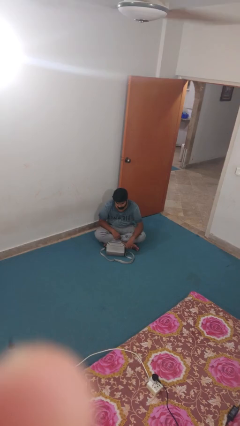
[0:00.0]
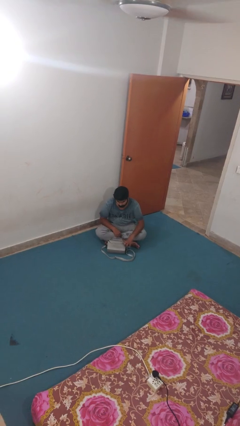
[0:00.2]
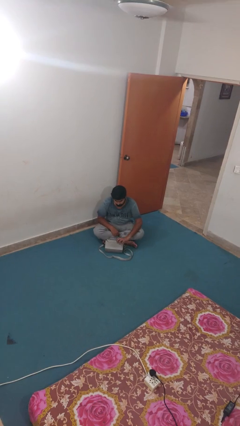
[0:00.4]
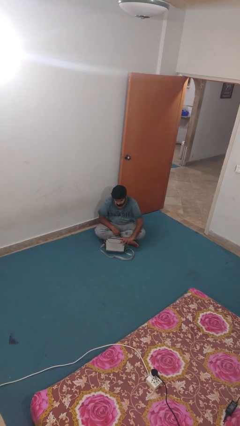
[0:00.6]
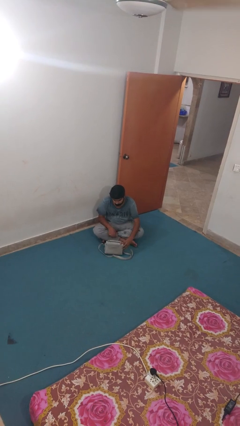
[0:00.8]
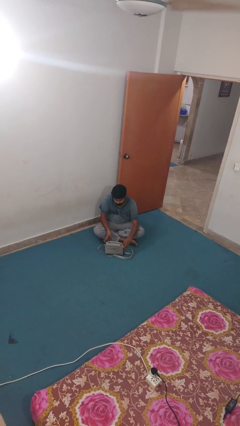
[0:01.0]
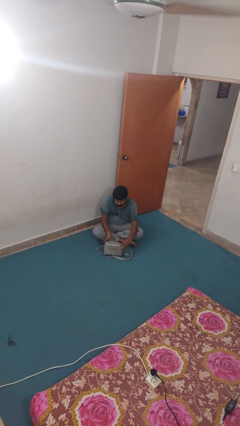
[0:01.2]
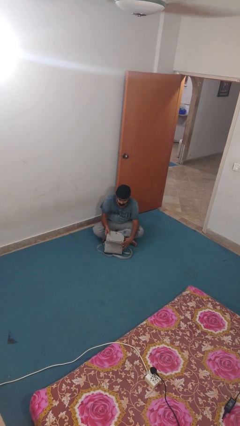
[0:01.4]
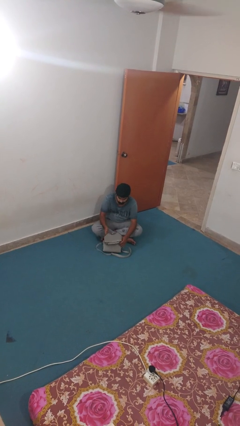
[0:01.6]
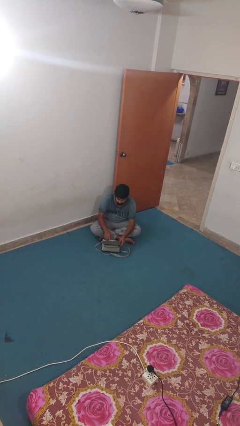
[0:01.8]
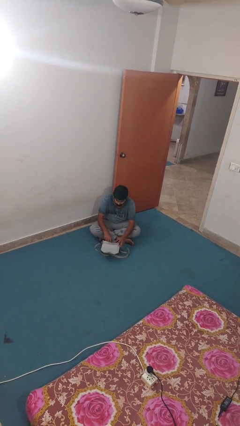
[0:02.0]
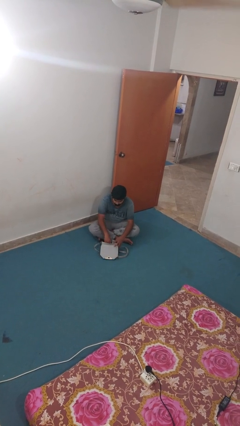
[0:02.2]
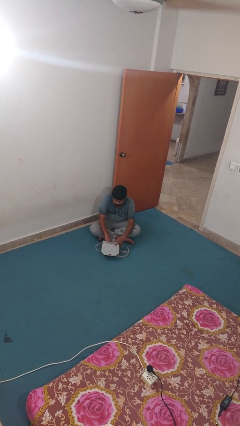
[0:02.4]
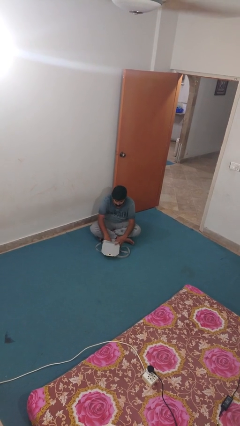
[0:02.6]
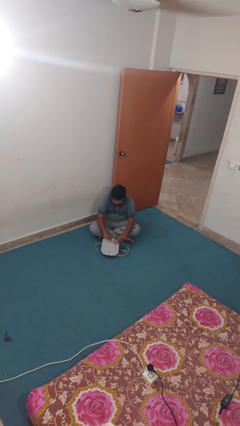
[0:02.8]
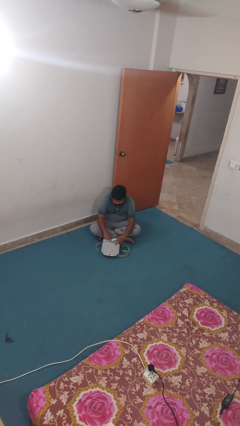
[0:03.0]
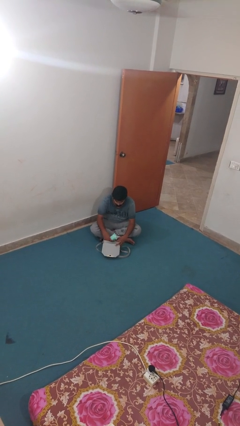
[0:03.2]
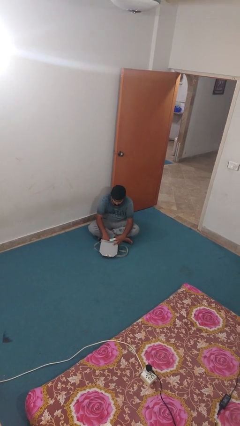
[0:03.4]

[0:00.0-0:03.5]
person searches in purse

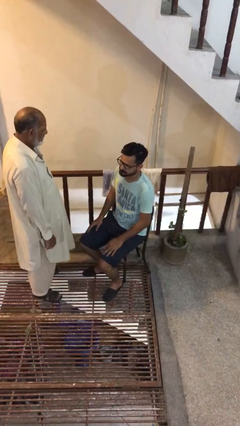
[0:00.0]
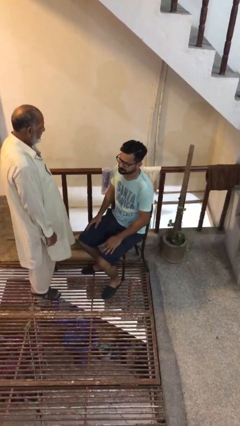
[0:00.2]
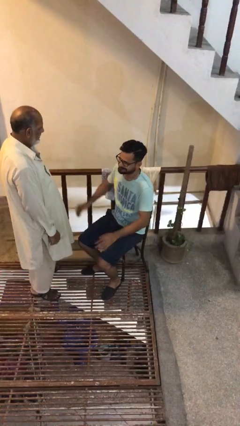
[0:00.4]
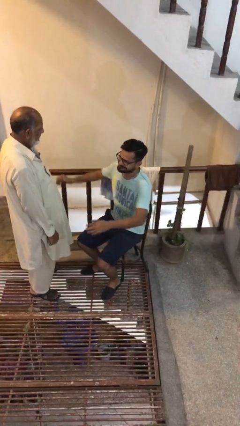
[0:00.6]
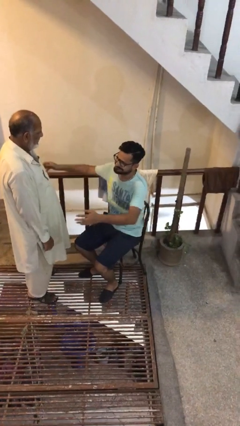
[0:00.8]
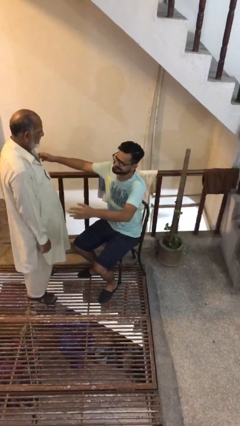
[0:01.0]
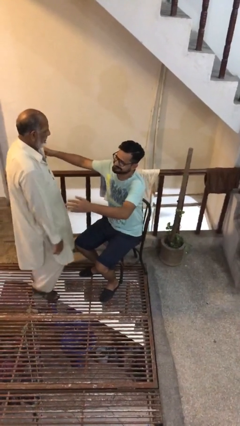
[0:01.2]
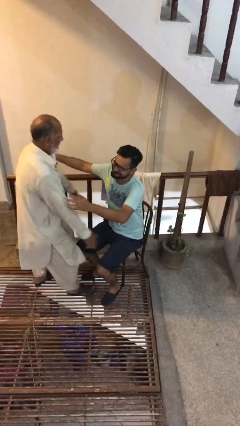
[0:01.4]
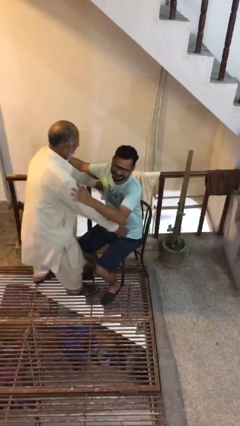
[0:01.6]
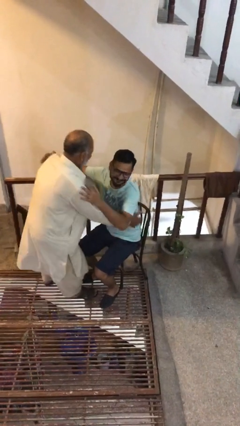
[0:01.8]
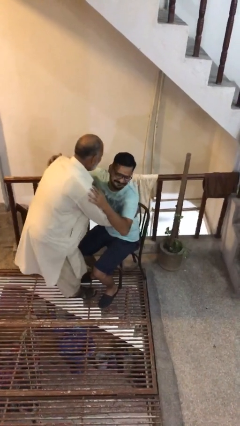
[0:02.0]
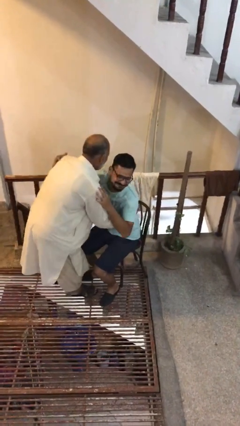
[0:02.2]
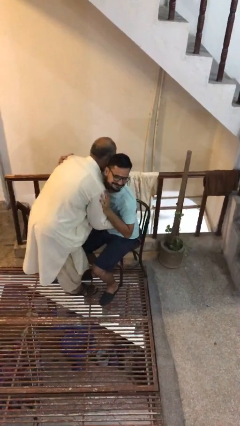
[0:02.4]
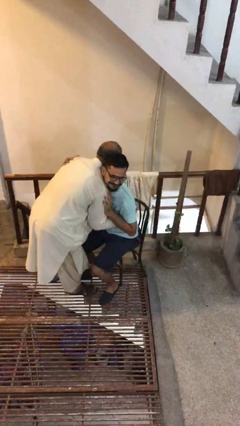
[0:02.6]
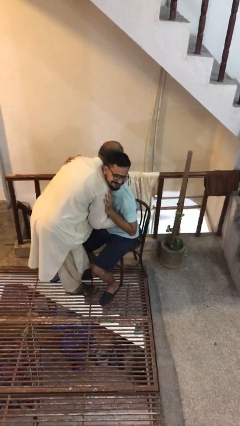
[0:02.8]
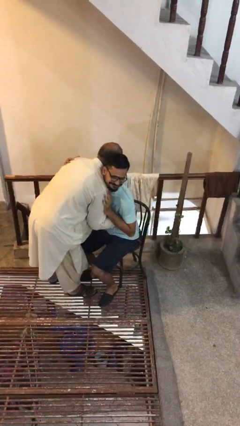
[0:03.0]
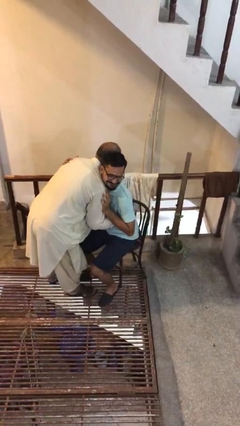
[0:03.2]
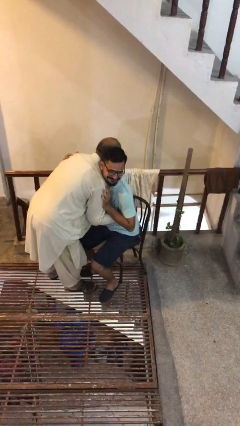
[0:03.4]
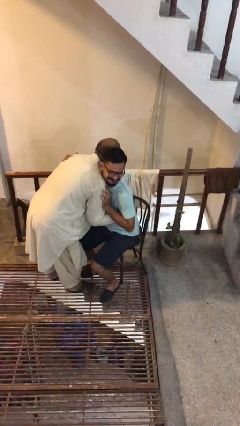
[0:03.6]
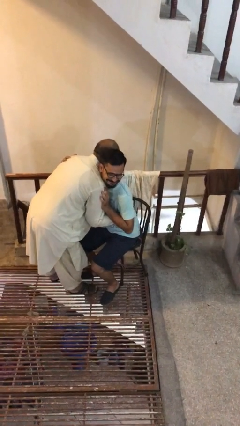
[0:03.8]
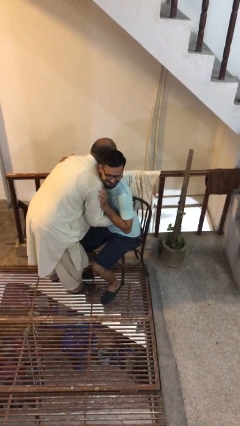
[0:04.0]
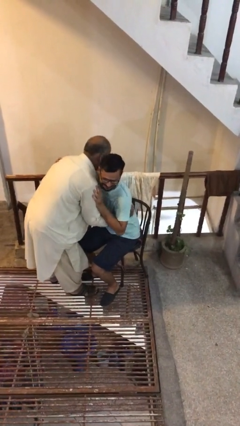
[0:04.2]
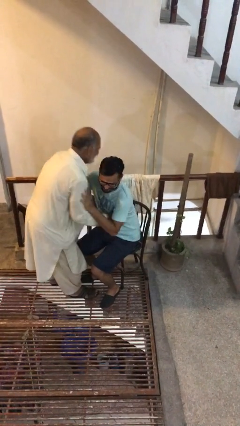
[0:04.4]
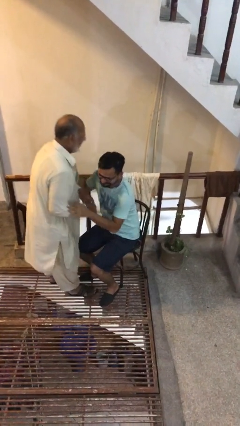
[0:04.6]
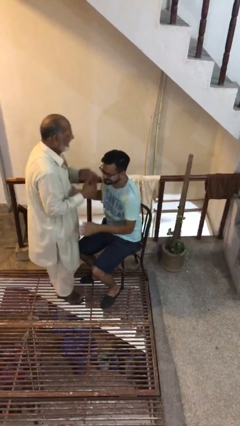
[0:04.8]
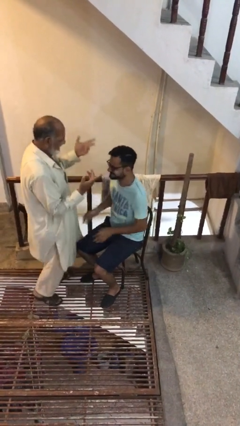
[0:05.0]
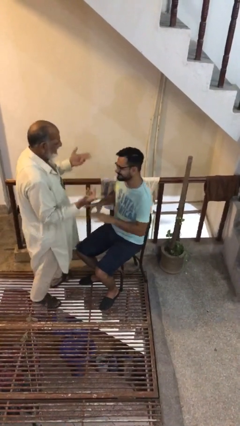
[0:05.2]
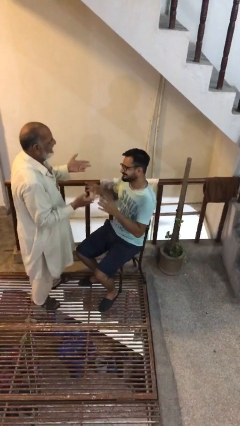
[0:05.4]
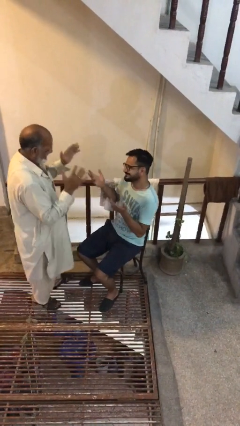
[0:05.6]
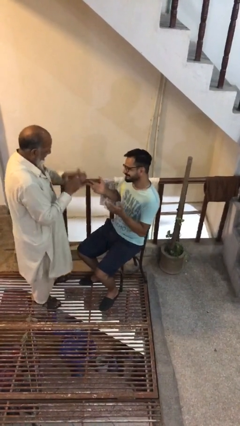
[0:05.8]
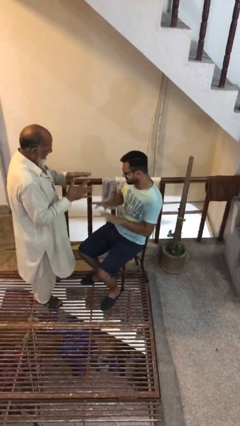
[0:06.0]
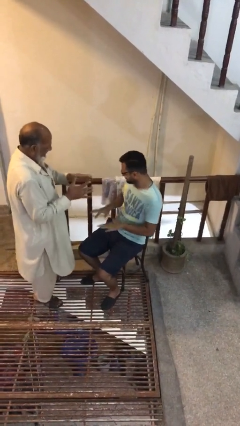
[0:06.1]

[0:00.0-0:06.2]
person embraces person

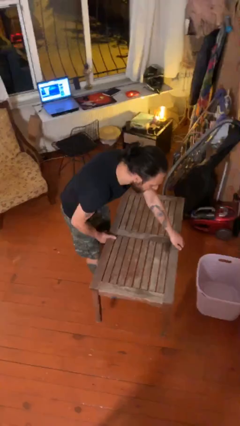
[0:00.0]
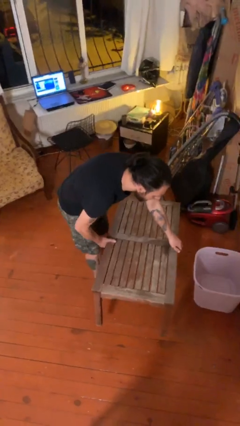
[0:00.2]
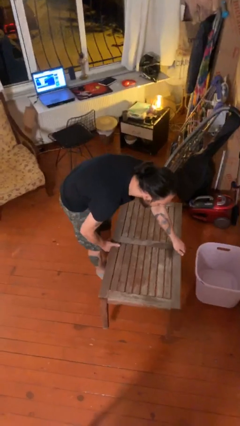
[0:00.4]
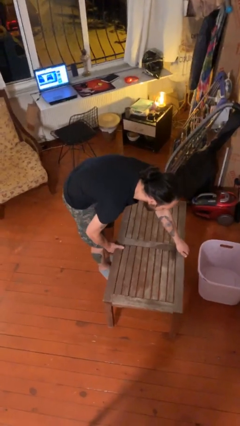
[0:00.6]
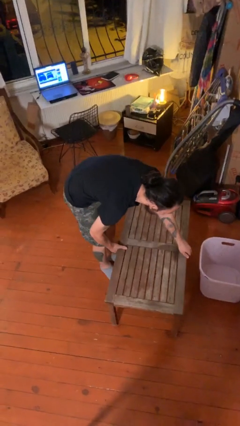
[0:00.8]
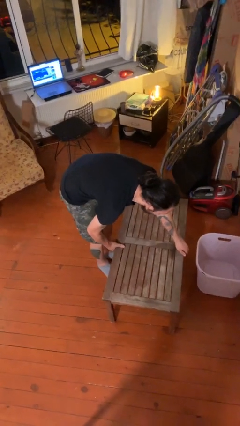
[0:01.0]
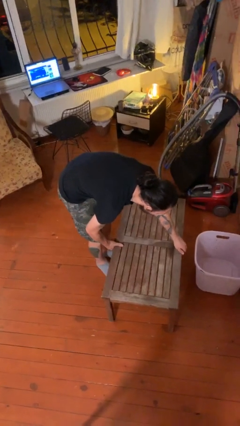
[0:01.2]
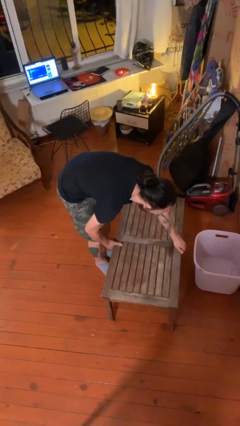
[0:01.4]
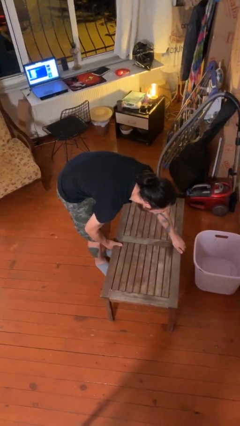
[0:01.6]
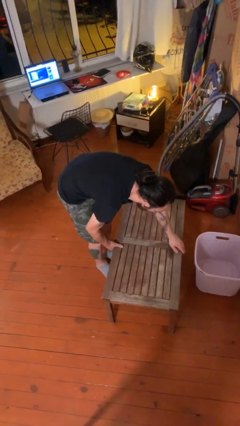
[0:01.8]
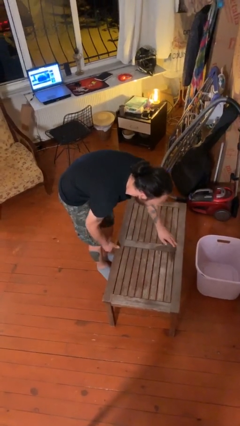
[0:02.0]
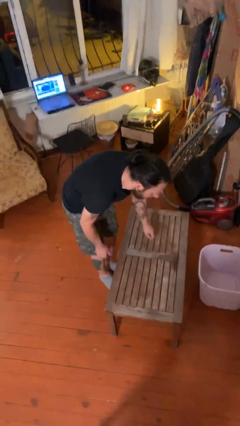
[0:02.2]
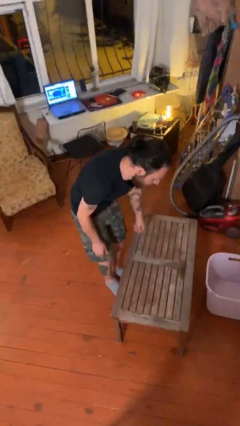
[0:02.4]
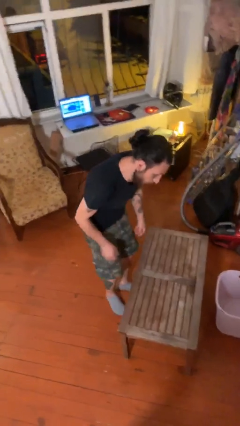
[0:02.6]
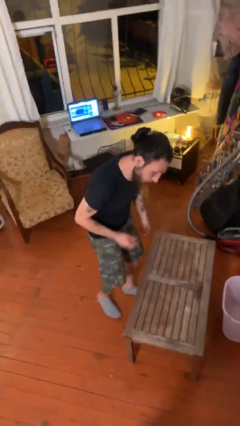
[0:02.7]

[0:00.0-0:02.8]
person puts down object on floor

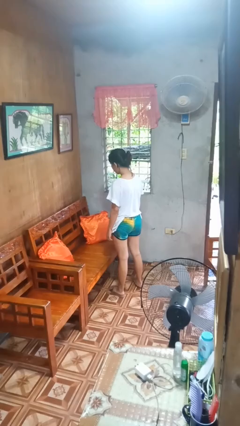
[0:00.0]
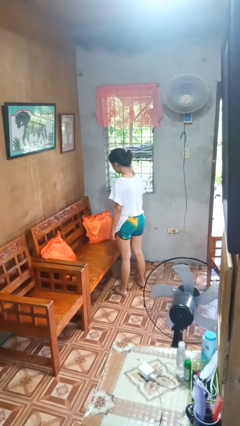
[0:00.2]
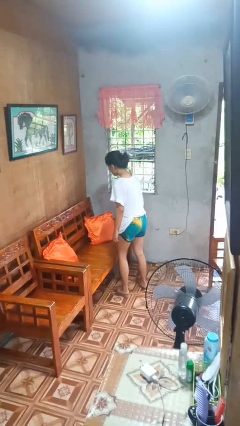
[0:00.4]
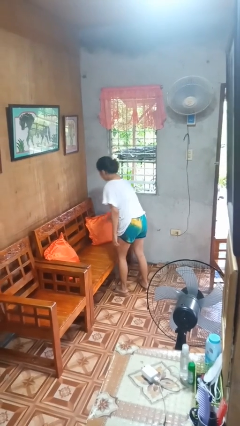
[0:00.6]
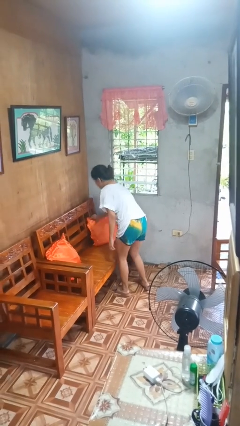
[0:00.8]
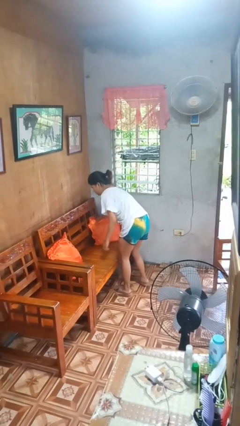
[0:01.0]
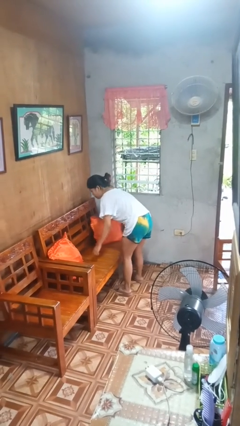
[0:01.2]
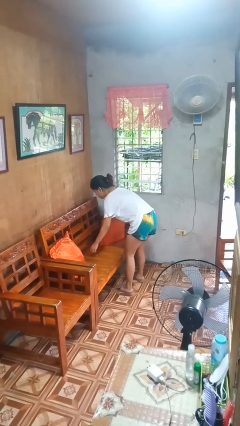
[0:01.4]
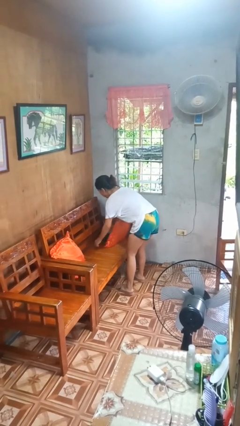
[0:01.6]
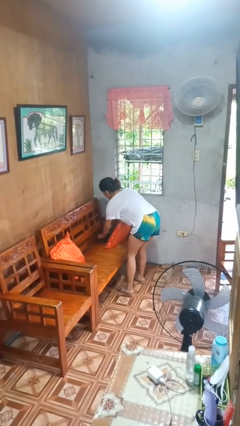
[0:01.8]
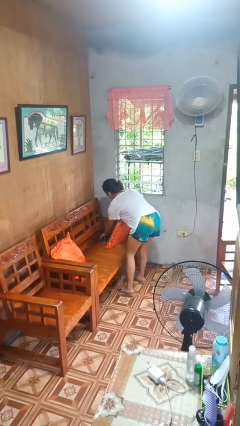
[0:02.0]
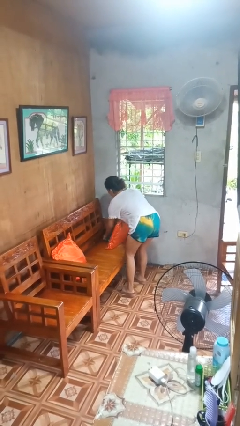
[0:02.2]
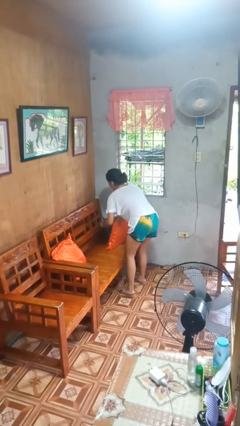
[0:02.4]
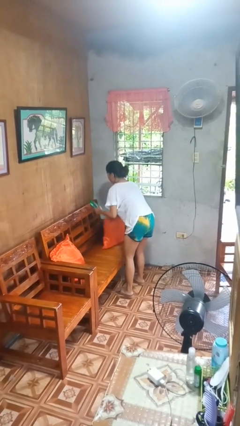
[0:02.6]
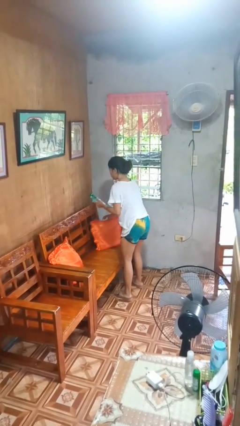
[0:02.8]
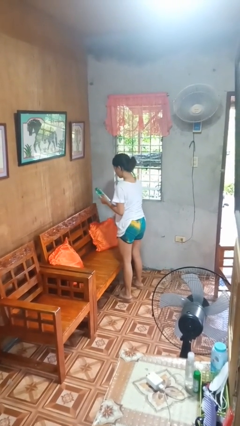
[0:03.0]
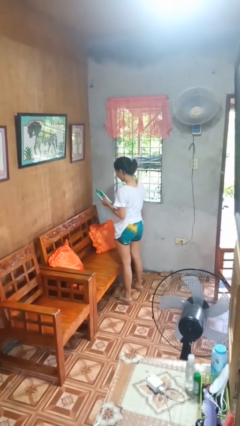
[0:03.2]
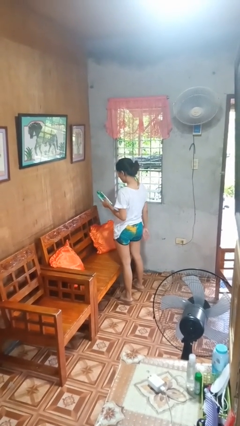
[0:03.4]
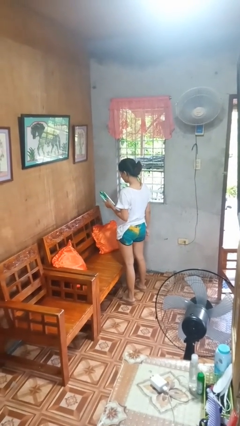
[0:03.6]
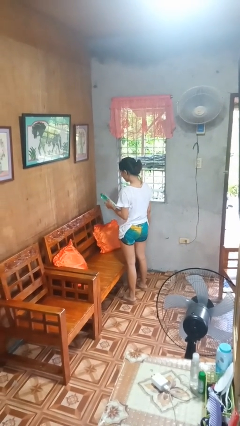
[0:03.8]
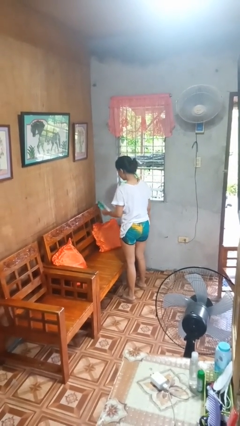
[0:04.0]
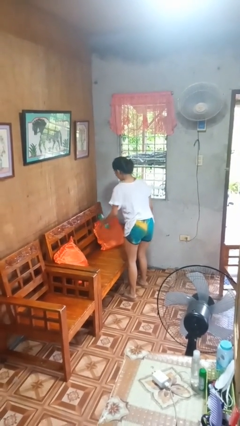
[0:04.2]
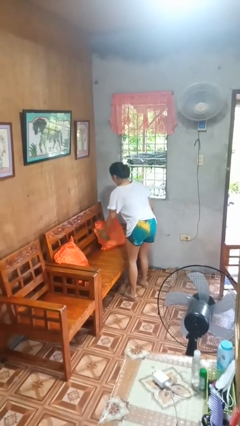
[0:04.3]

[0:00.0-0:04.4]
person picks up object from couch

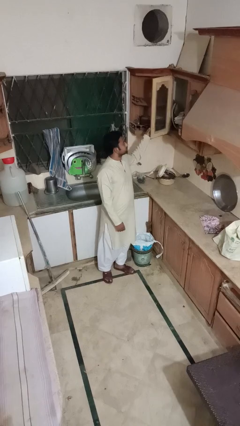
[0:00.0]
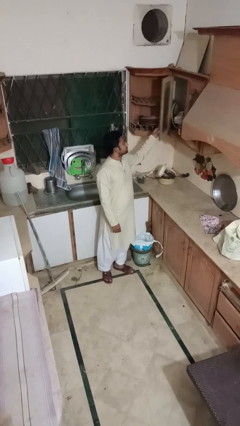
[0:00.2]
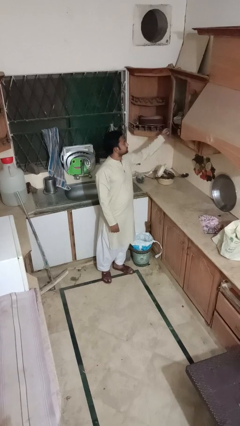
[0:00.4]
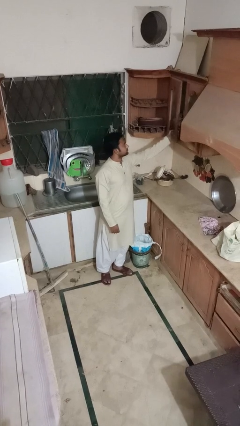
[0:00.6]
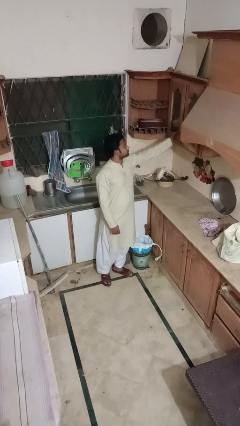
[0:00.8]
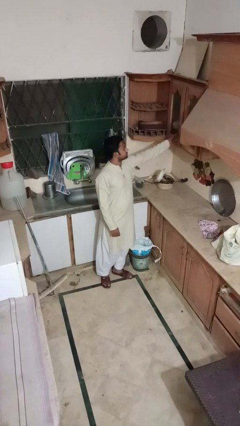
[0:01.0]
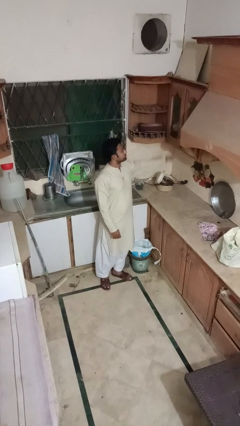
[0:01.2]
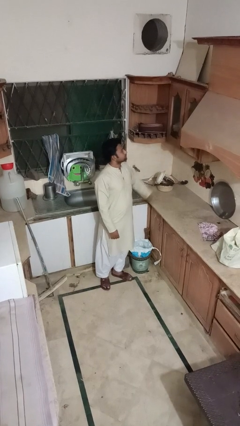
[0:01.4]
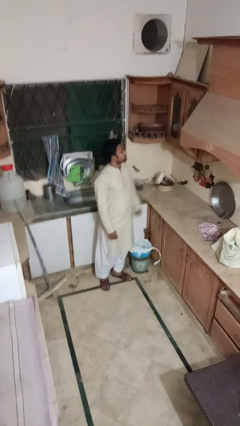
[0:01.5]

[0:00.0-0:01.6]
person closes cabinet
